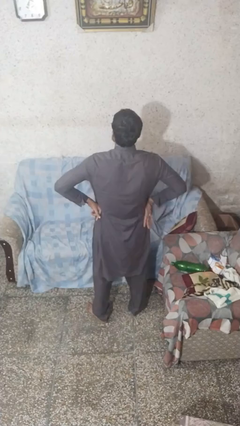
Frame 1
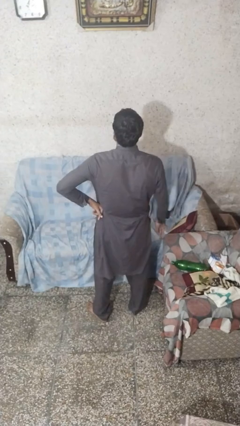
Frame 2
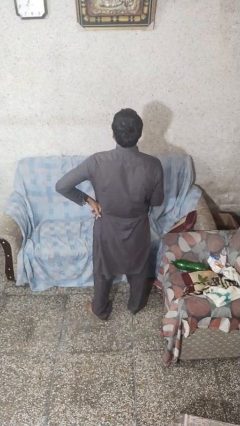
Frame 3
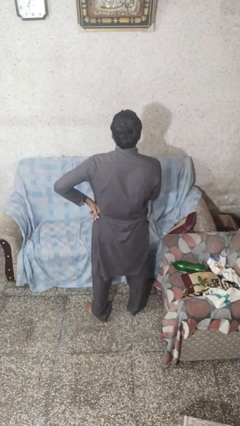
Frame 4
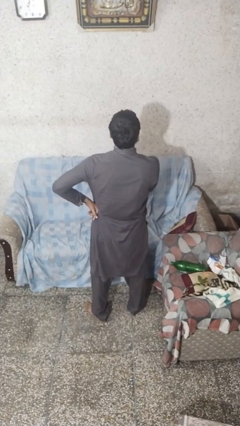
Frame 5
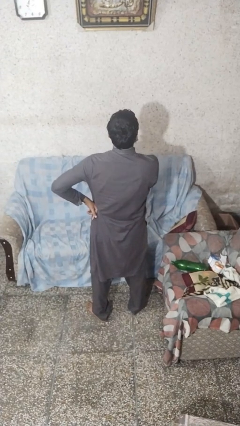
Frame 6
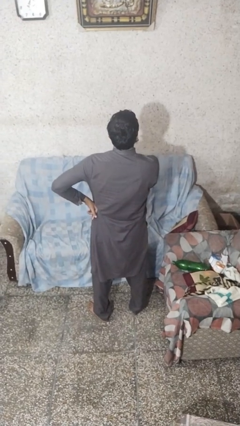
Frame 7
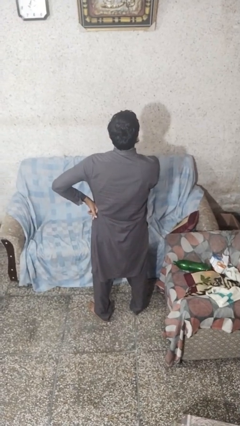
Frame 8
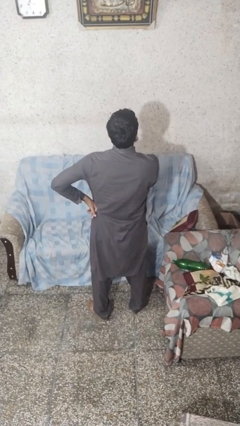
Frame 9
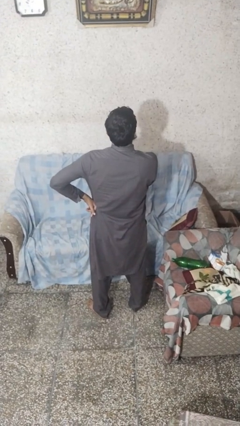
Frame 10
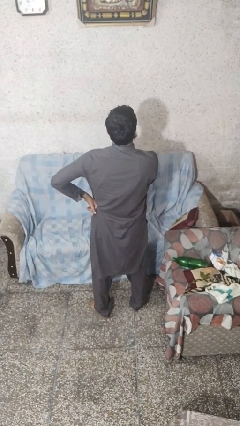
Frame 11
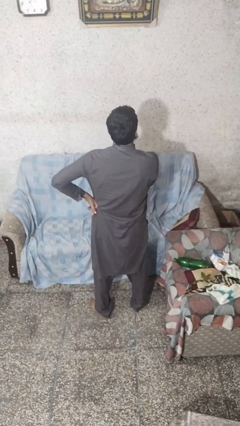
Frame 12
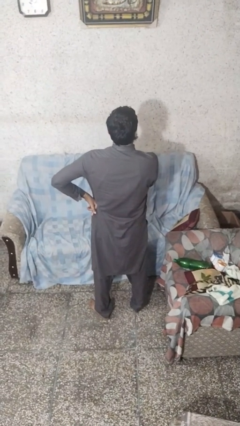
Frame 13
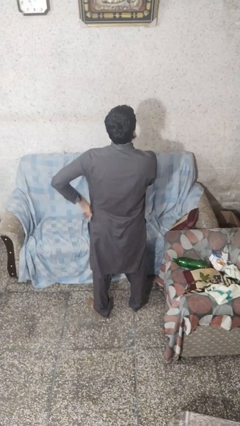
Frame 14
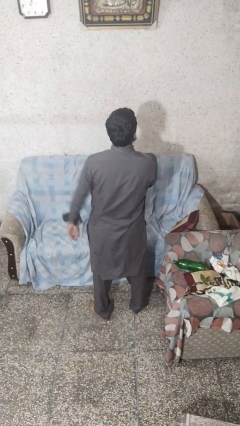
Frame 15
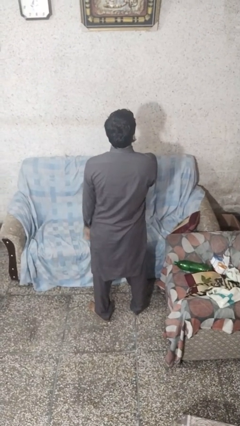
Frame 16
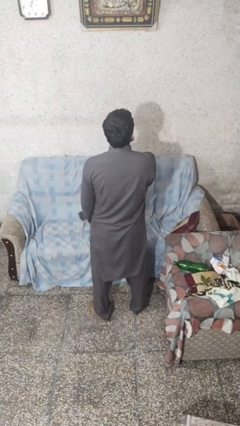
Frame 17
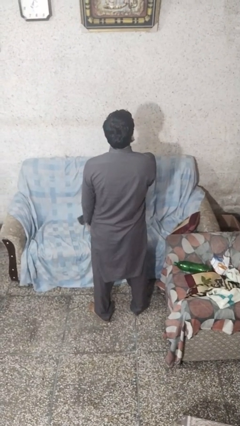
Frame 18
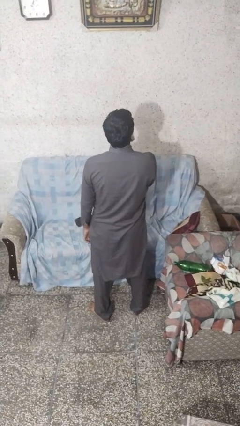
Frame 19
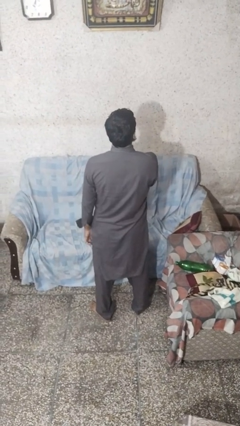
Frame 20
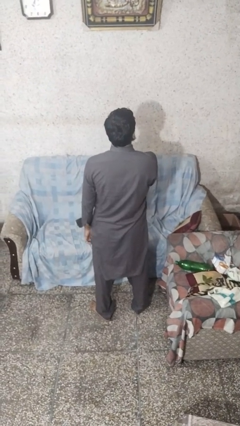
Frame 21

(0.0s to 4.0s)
person gestures be quiet

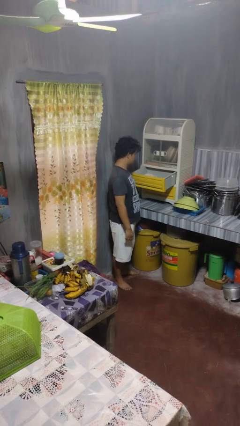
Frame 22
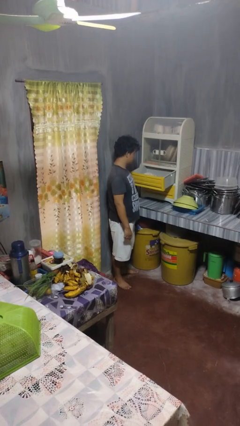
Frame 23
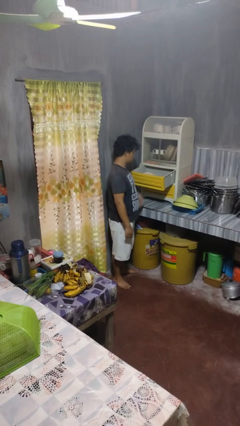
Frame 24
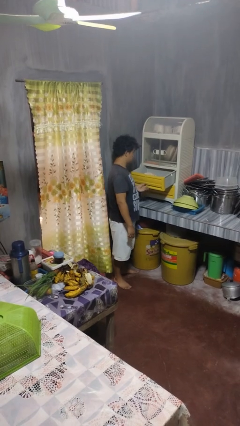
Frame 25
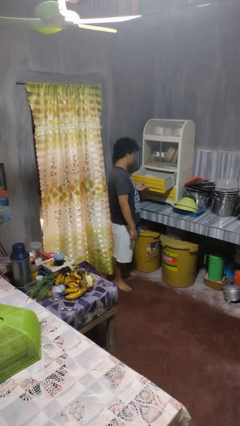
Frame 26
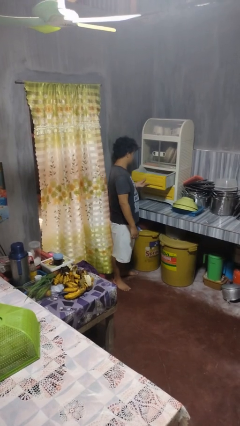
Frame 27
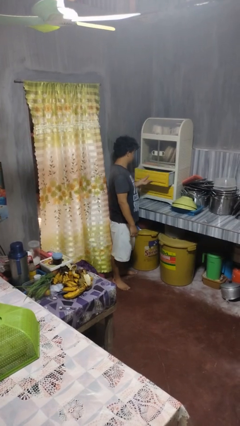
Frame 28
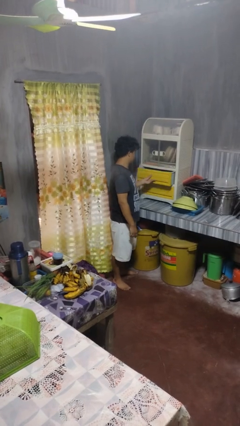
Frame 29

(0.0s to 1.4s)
person closes kitchen drawer

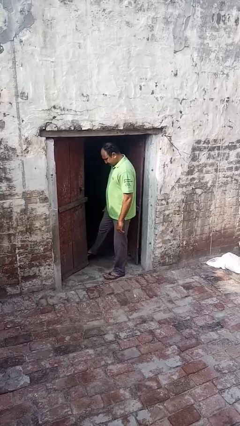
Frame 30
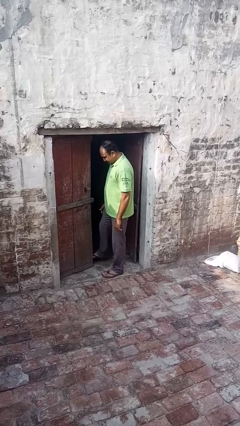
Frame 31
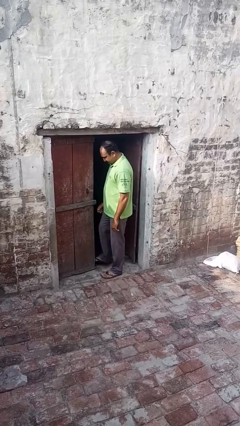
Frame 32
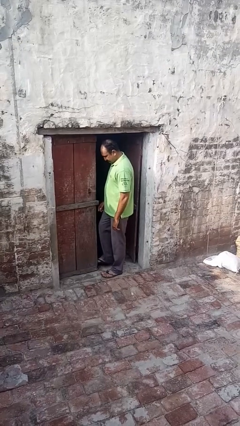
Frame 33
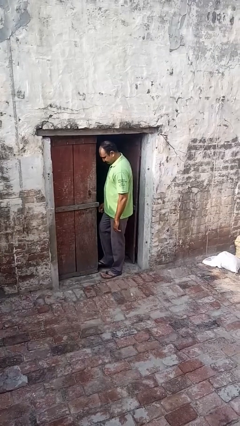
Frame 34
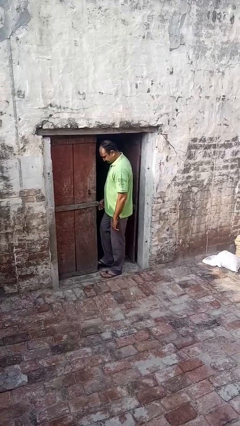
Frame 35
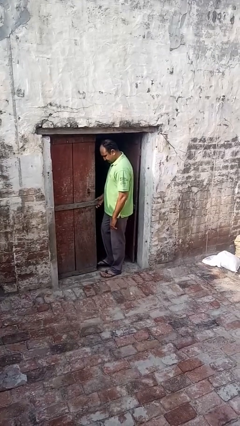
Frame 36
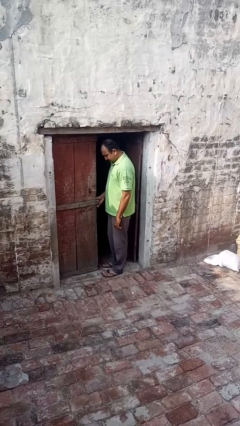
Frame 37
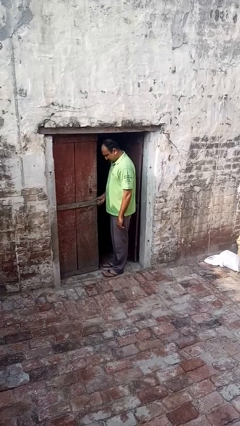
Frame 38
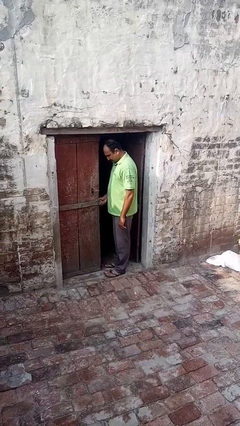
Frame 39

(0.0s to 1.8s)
person closes door with foot

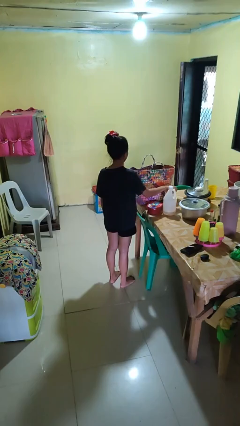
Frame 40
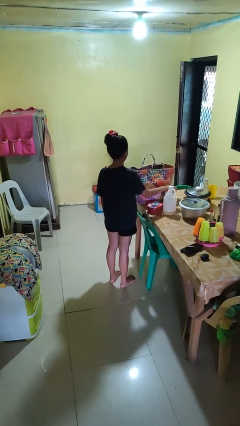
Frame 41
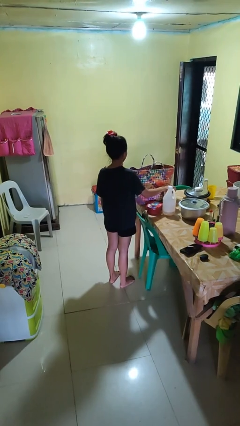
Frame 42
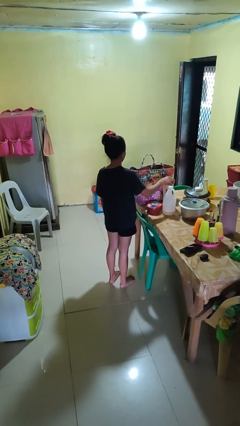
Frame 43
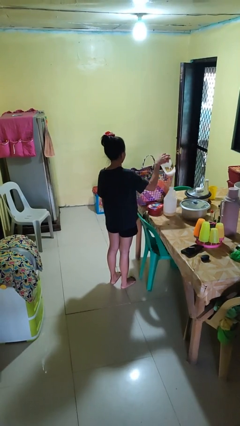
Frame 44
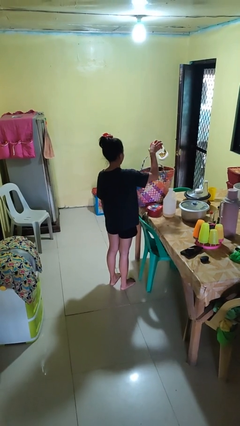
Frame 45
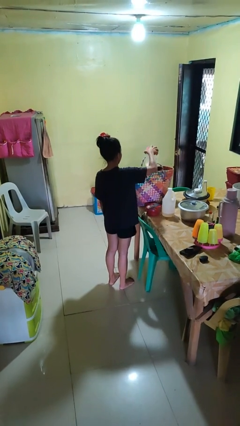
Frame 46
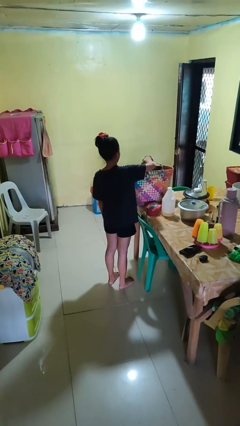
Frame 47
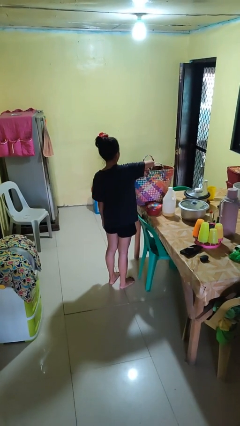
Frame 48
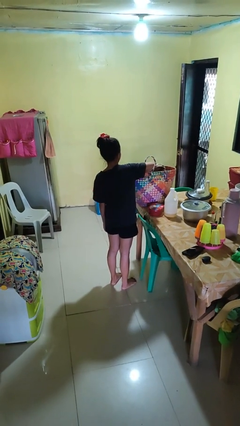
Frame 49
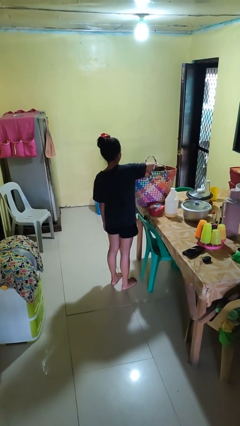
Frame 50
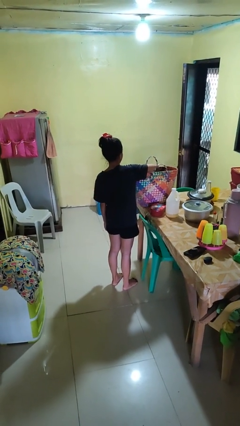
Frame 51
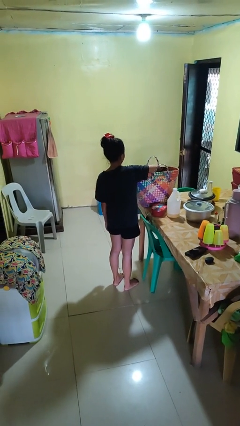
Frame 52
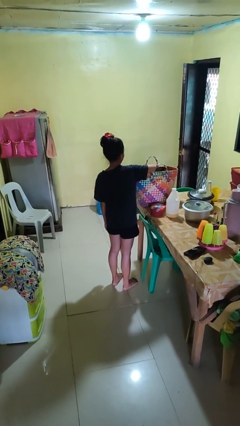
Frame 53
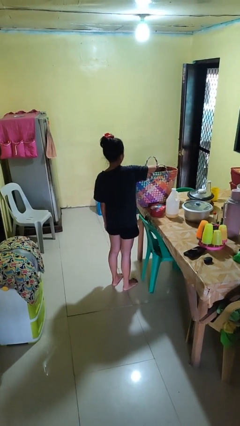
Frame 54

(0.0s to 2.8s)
person puts object into basket

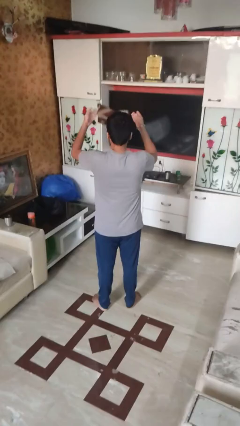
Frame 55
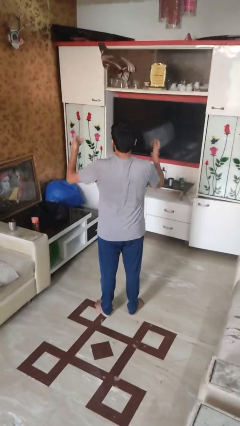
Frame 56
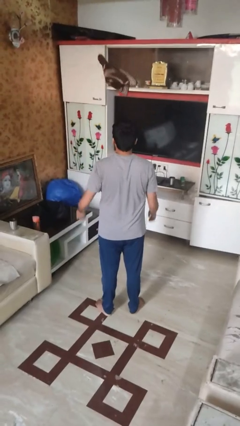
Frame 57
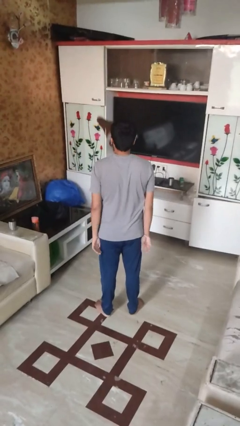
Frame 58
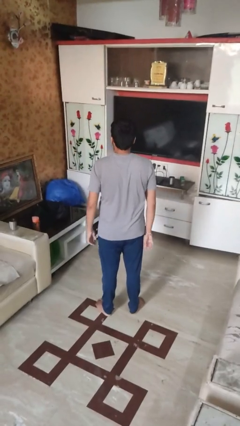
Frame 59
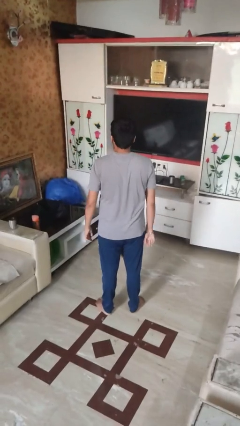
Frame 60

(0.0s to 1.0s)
person throws object into air

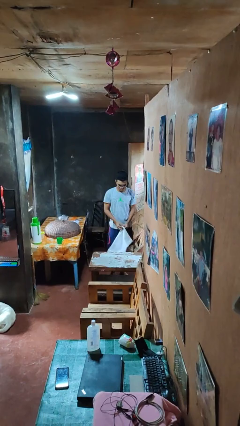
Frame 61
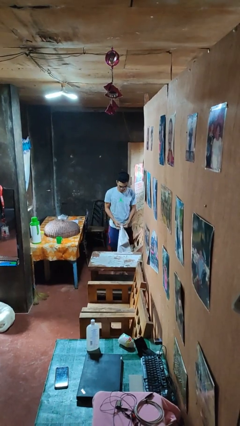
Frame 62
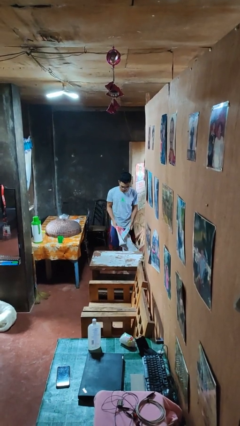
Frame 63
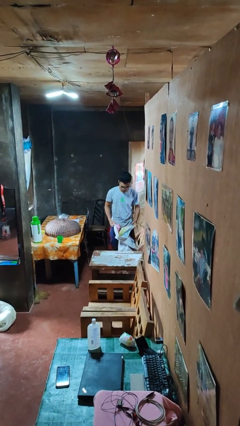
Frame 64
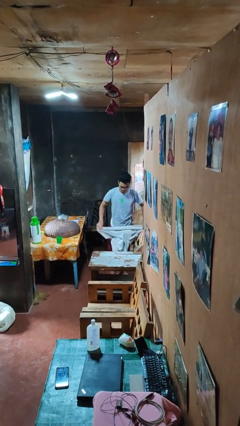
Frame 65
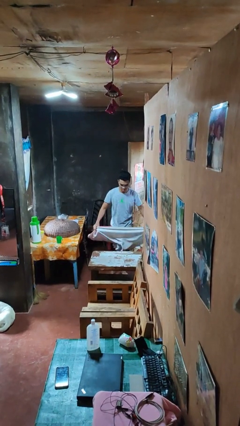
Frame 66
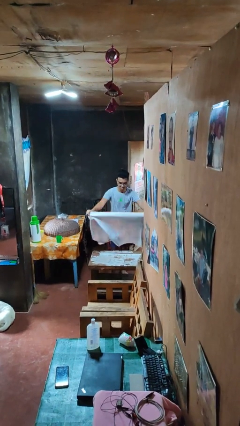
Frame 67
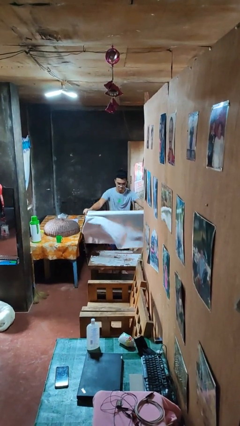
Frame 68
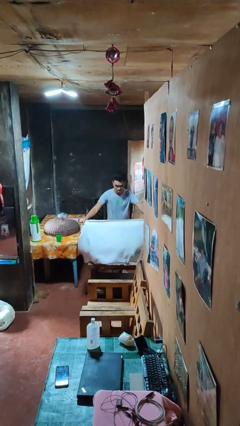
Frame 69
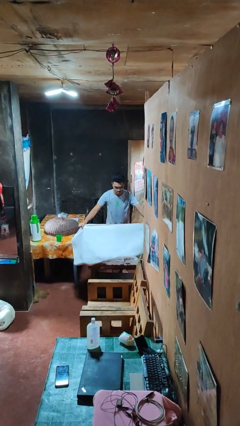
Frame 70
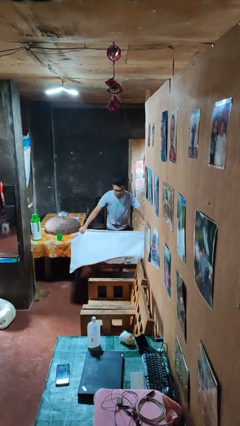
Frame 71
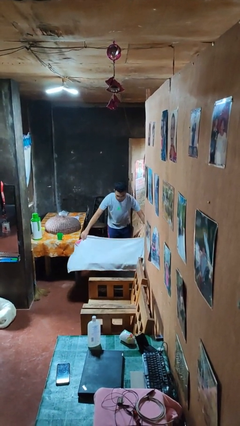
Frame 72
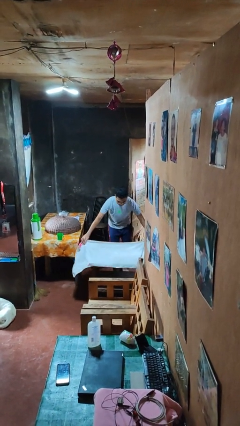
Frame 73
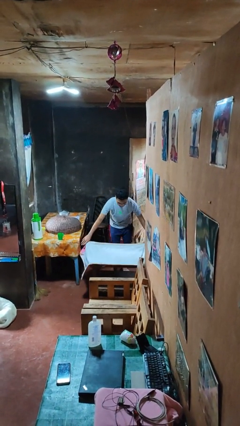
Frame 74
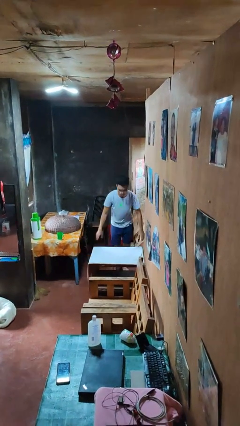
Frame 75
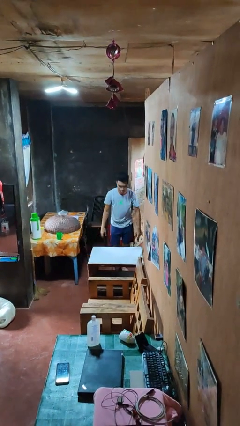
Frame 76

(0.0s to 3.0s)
person spreads tablecloth

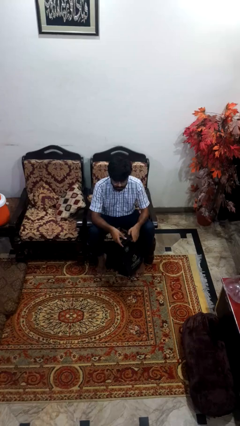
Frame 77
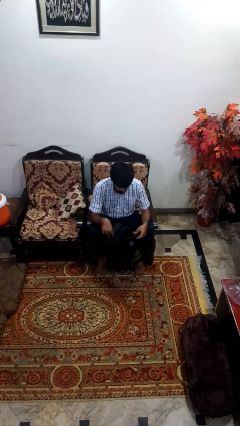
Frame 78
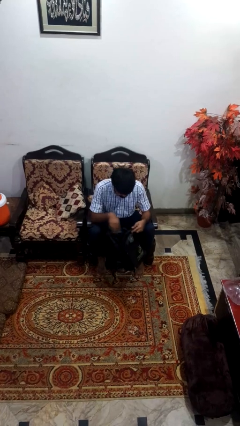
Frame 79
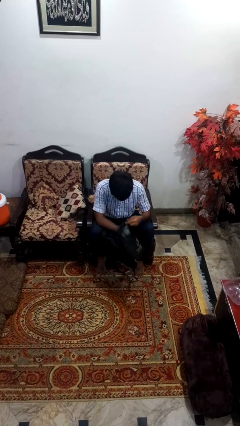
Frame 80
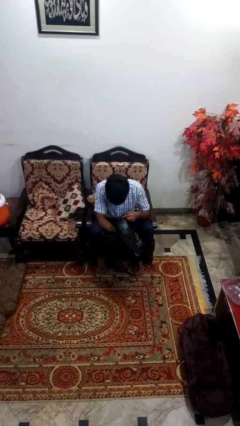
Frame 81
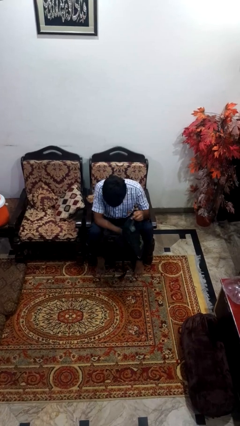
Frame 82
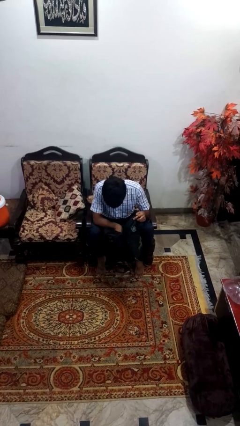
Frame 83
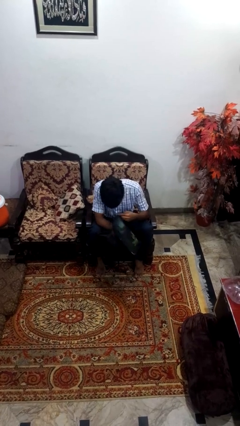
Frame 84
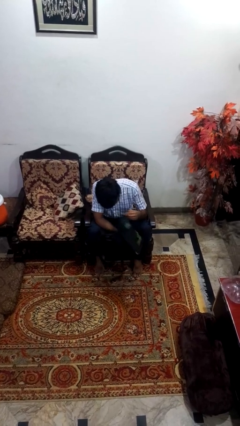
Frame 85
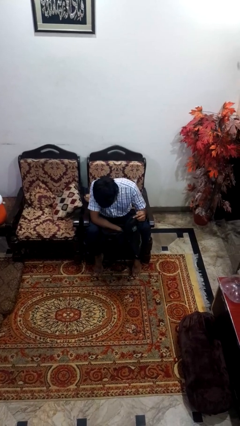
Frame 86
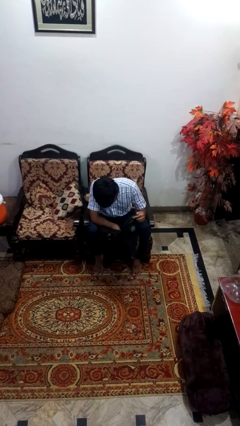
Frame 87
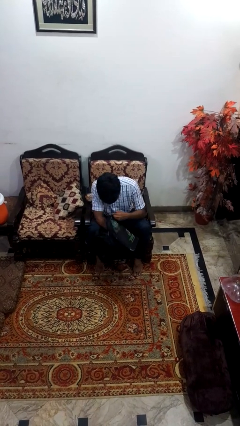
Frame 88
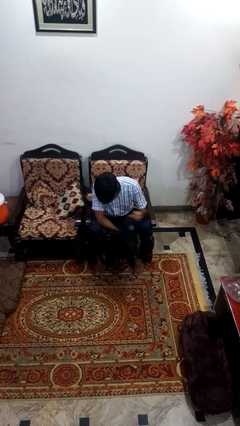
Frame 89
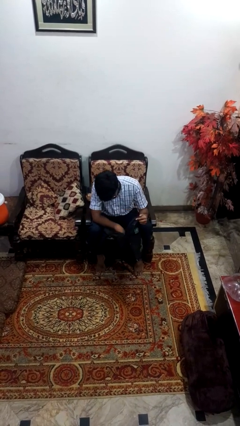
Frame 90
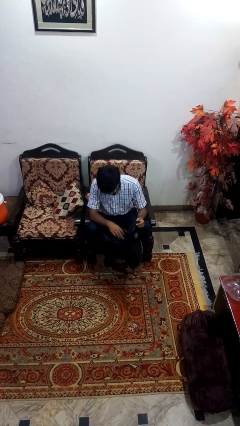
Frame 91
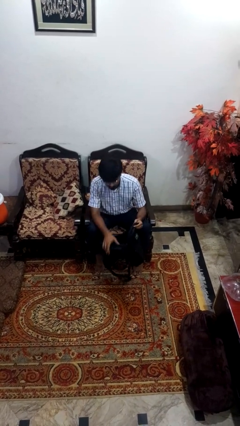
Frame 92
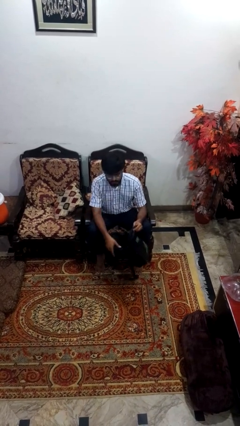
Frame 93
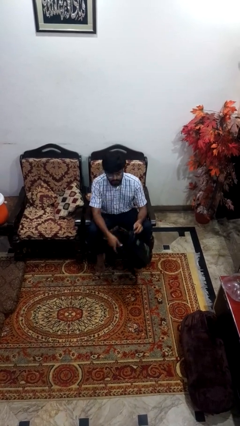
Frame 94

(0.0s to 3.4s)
person searches in bag
